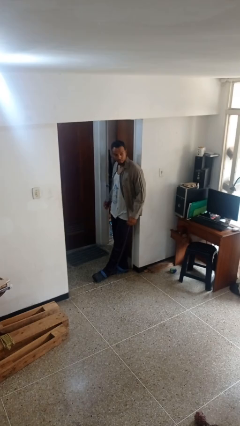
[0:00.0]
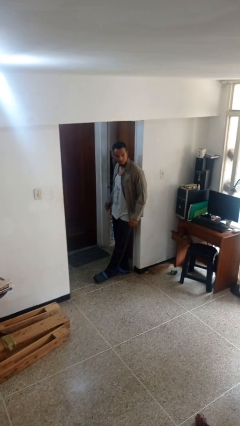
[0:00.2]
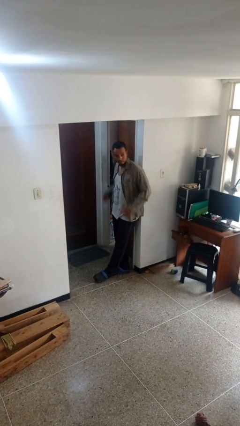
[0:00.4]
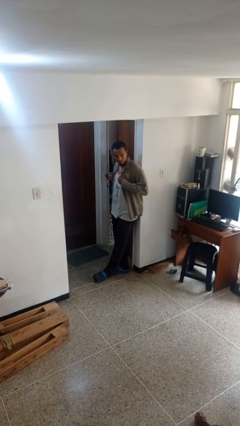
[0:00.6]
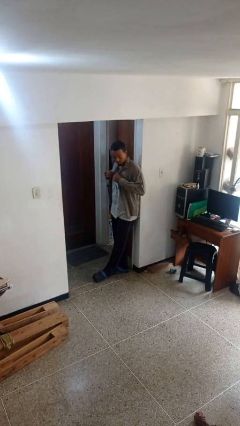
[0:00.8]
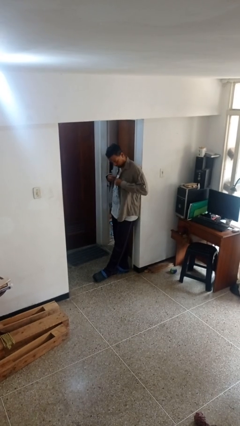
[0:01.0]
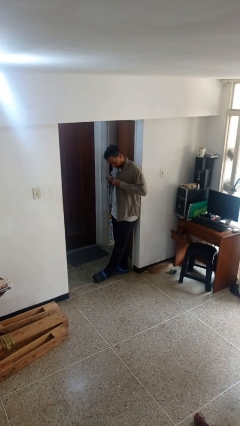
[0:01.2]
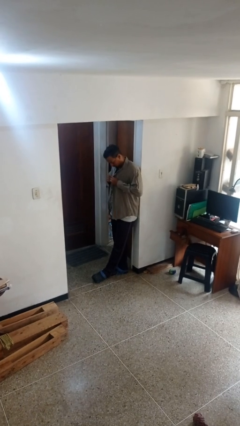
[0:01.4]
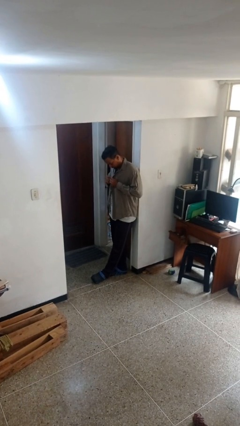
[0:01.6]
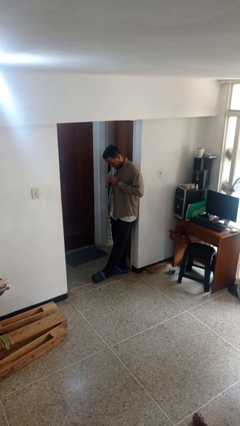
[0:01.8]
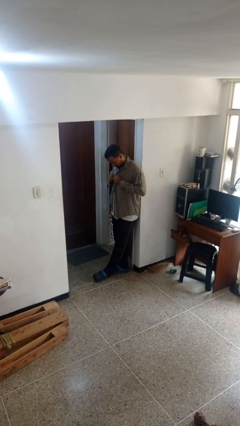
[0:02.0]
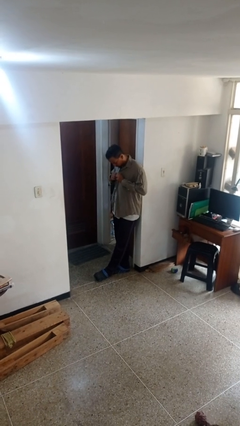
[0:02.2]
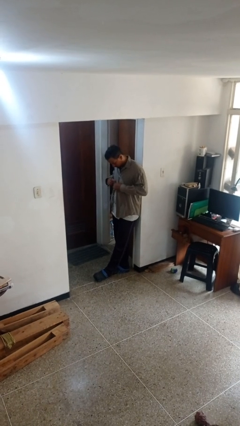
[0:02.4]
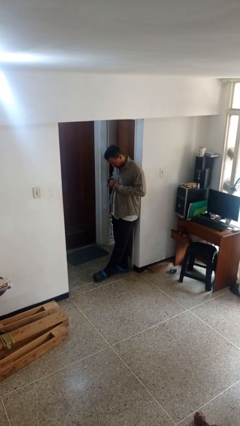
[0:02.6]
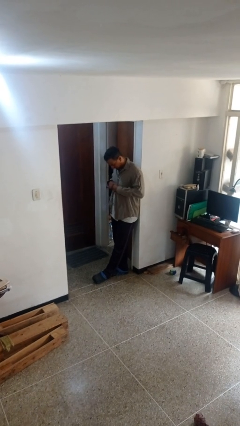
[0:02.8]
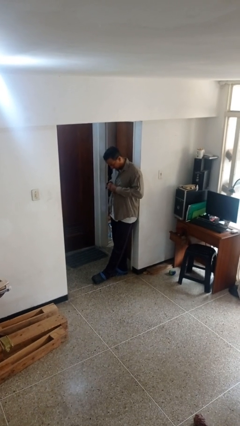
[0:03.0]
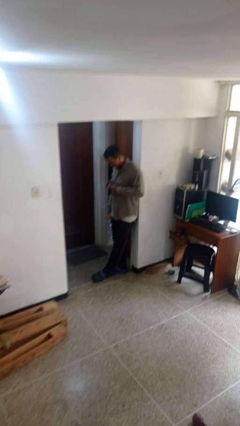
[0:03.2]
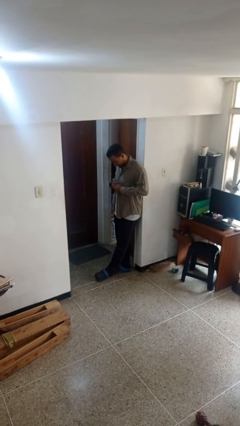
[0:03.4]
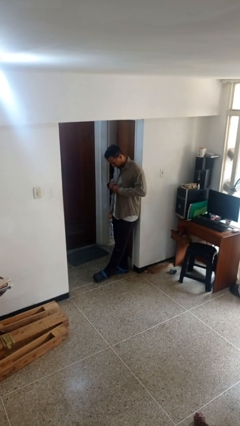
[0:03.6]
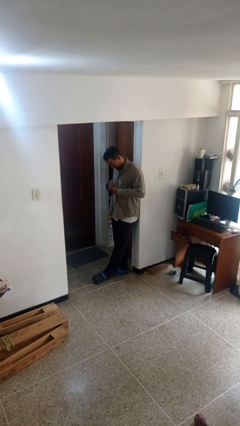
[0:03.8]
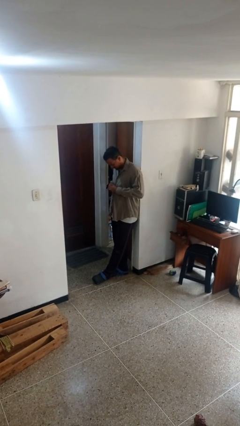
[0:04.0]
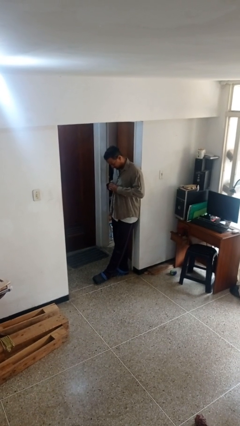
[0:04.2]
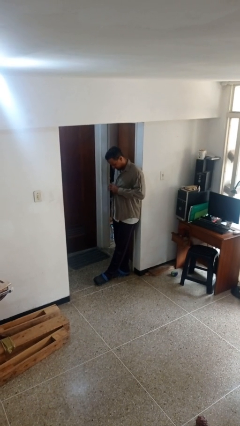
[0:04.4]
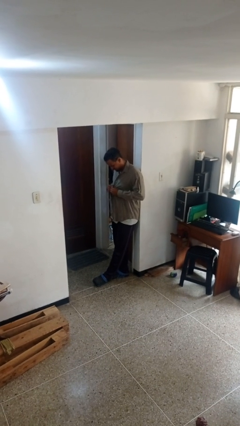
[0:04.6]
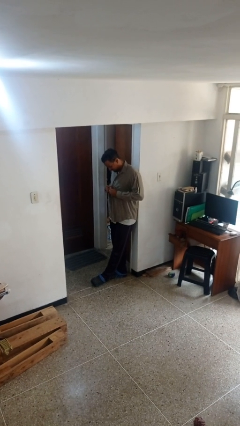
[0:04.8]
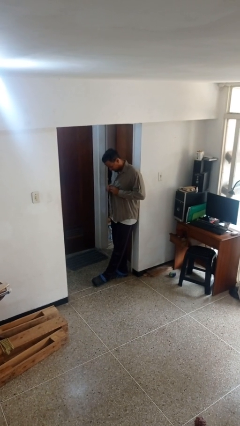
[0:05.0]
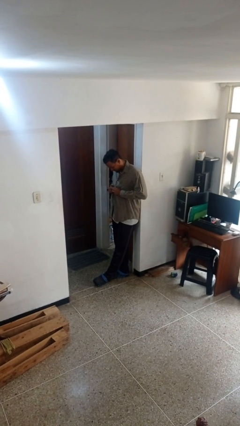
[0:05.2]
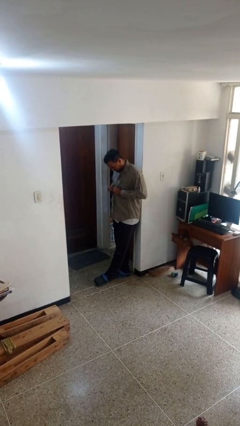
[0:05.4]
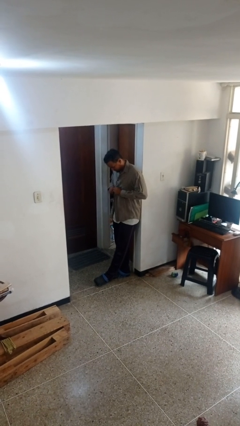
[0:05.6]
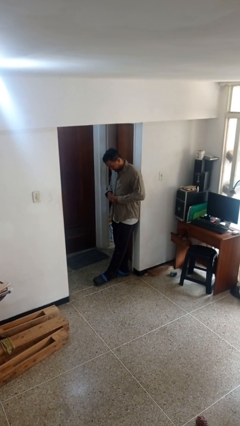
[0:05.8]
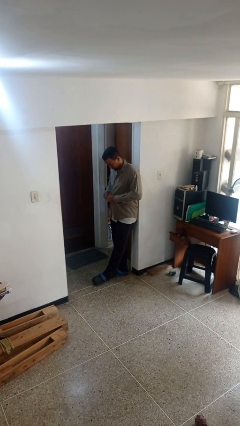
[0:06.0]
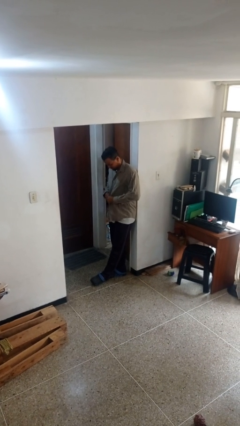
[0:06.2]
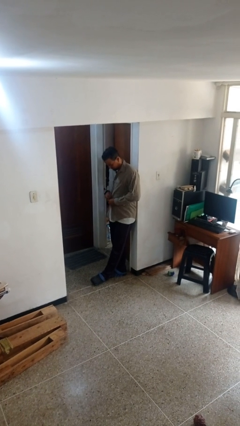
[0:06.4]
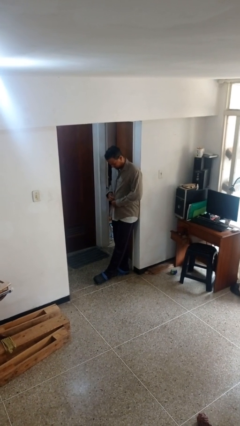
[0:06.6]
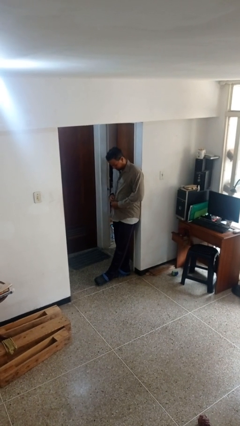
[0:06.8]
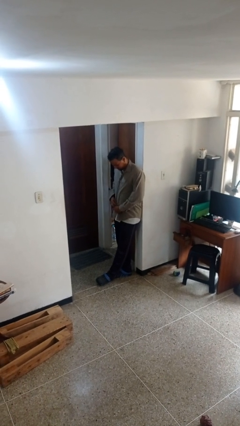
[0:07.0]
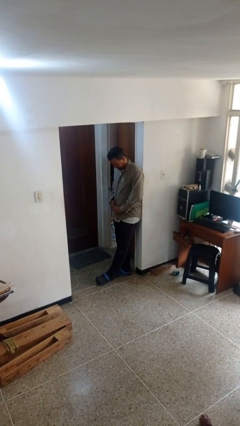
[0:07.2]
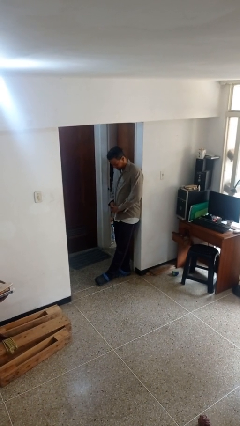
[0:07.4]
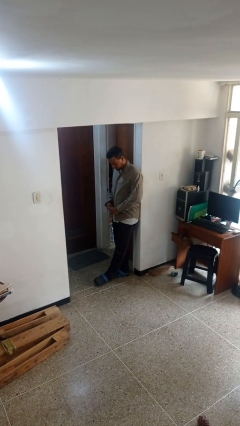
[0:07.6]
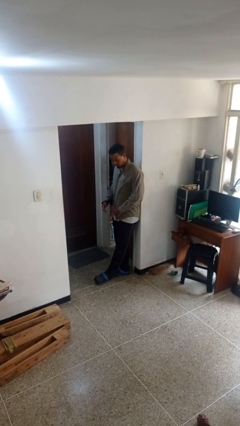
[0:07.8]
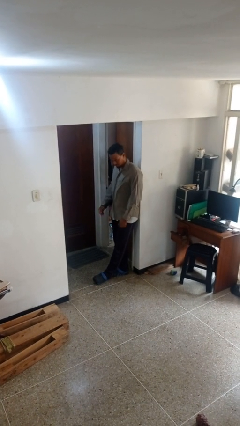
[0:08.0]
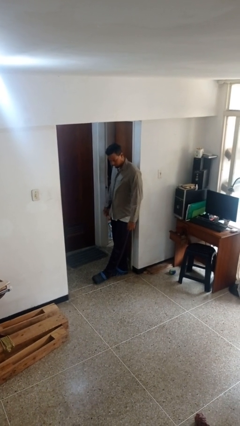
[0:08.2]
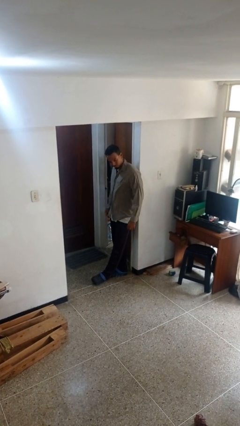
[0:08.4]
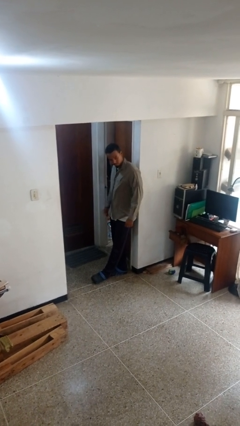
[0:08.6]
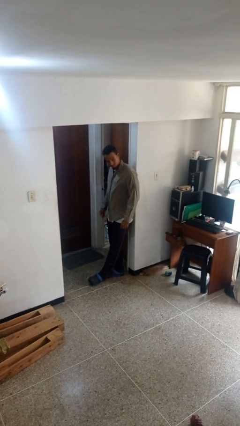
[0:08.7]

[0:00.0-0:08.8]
person buttons shirt

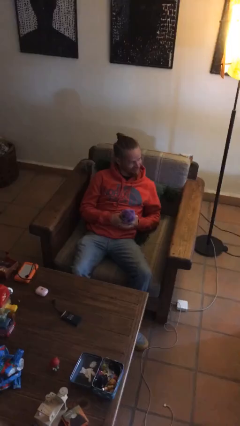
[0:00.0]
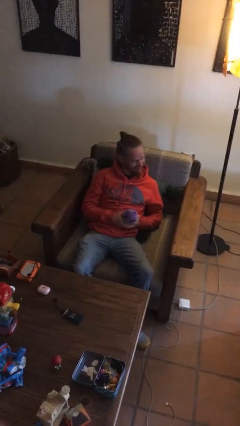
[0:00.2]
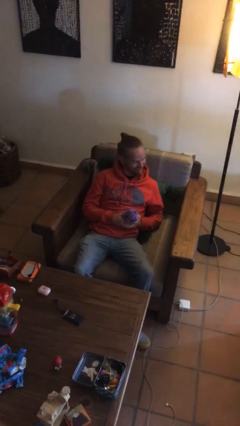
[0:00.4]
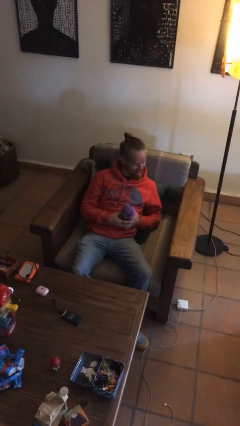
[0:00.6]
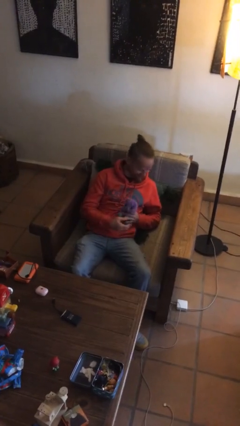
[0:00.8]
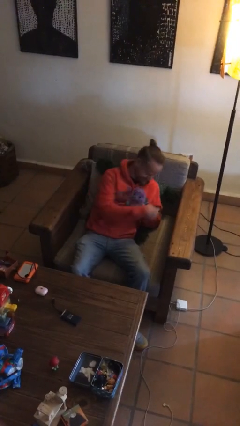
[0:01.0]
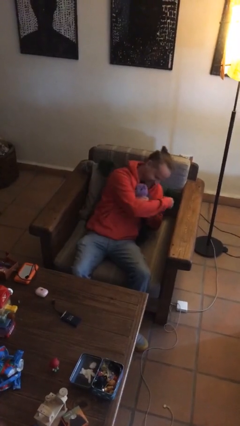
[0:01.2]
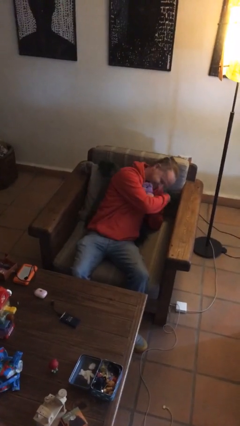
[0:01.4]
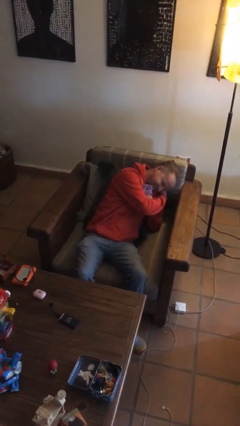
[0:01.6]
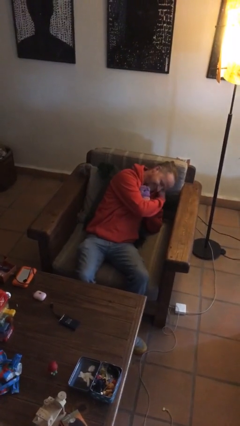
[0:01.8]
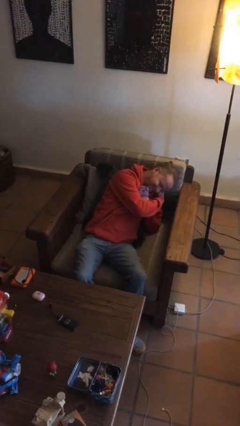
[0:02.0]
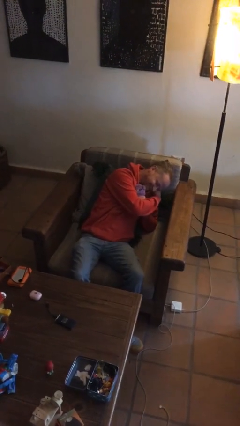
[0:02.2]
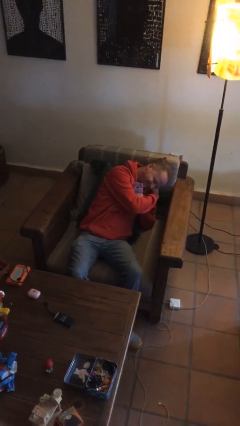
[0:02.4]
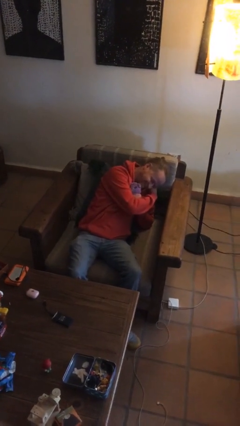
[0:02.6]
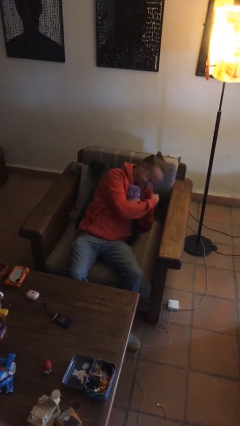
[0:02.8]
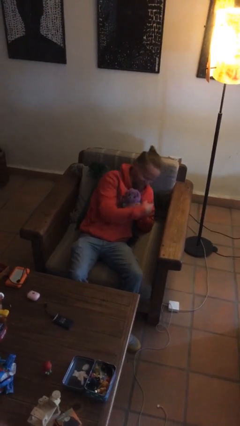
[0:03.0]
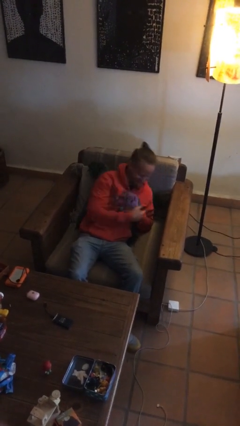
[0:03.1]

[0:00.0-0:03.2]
person hugs stuffed animal

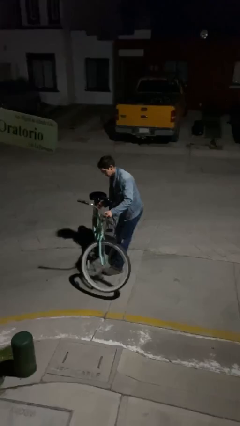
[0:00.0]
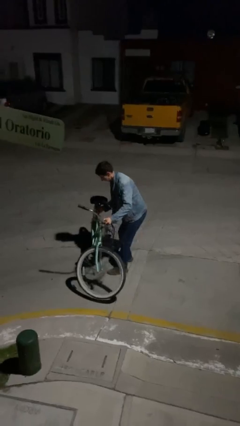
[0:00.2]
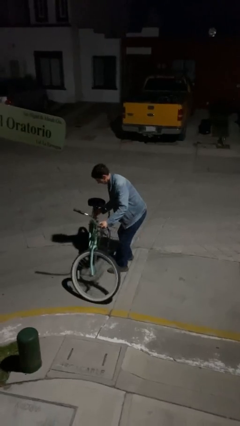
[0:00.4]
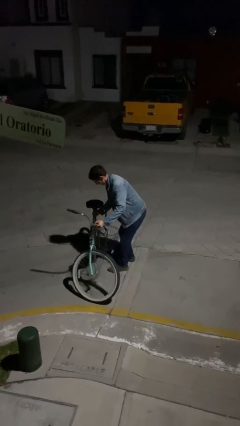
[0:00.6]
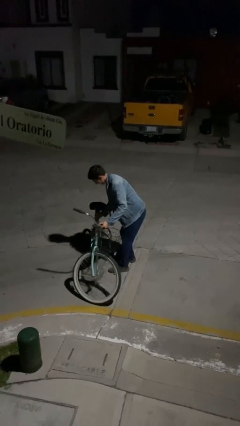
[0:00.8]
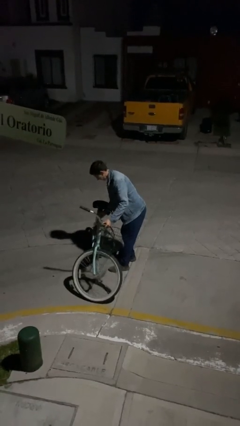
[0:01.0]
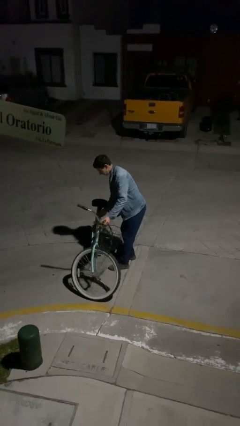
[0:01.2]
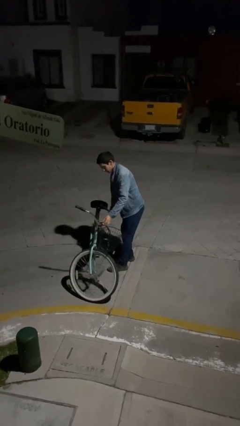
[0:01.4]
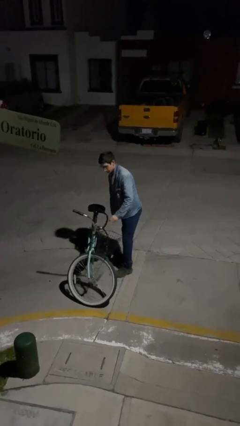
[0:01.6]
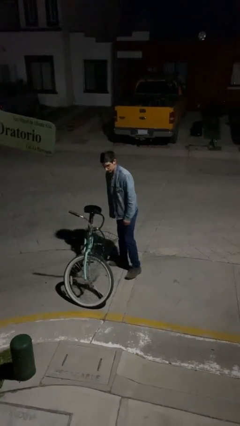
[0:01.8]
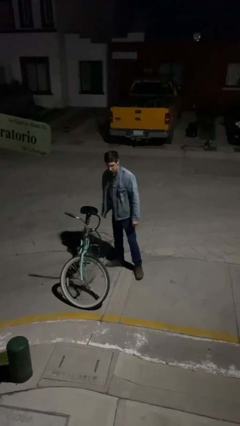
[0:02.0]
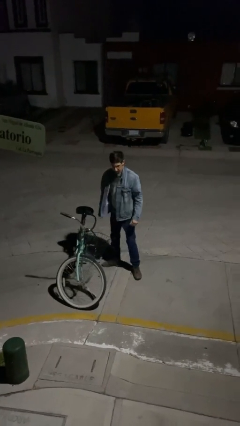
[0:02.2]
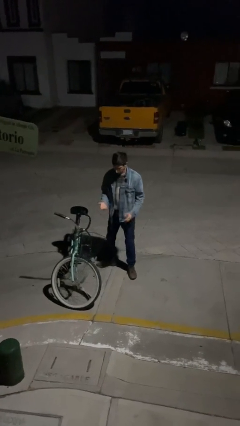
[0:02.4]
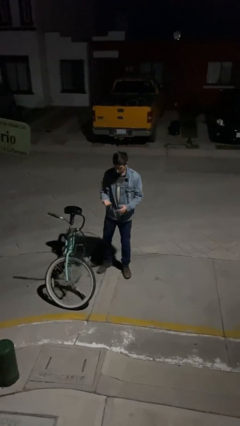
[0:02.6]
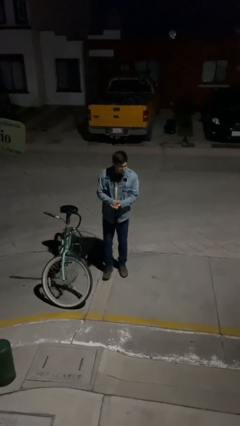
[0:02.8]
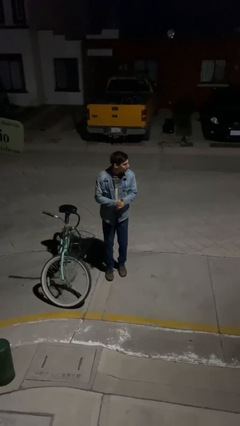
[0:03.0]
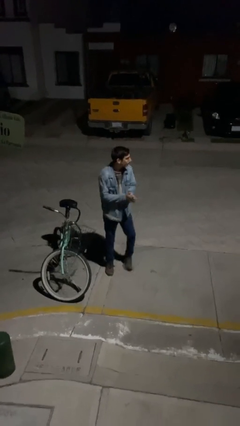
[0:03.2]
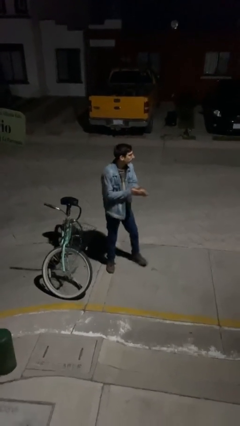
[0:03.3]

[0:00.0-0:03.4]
person puts down object on floor

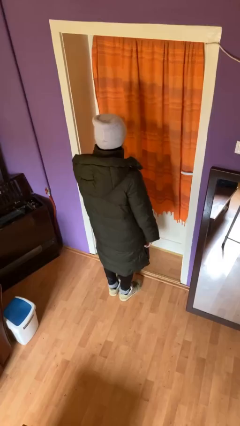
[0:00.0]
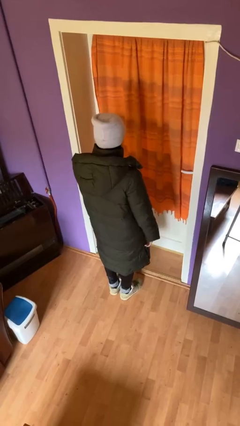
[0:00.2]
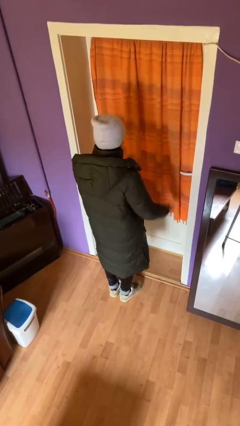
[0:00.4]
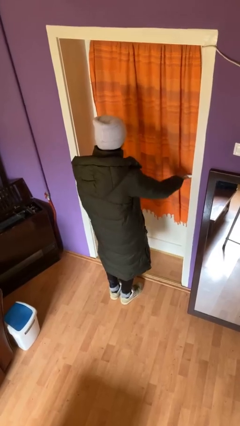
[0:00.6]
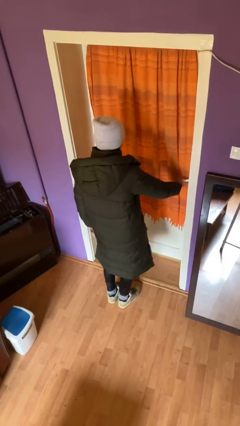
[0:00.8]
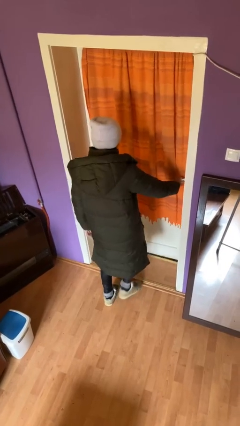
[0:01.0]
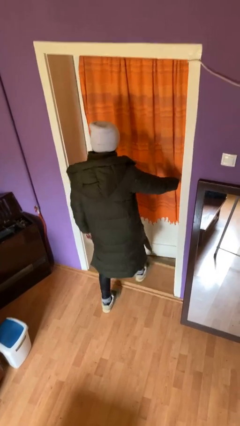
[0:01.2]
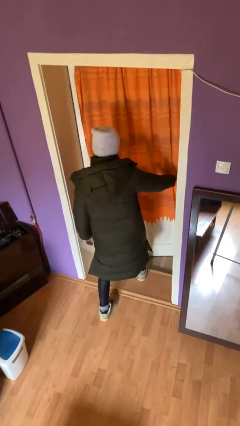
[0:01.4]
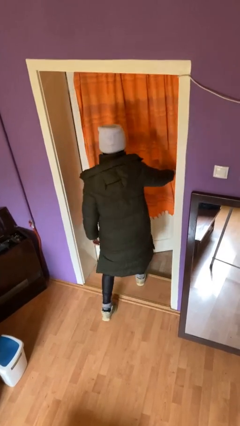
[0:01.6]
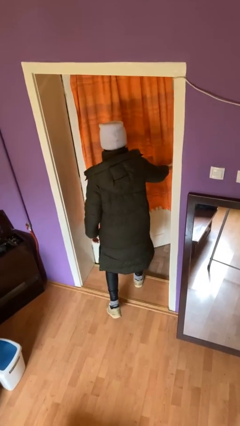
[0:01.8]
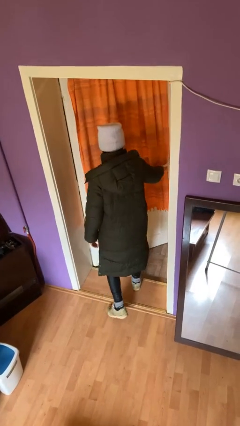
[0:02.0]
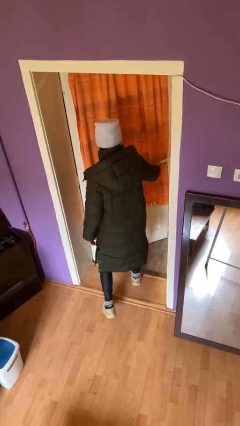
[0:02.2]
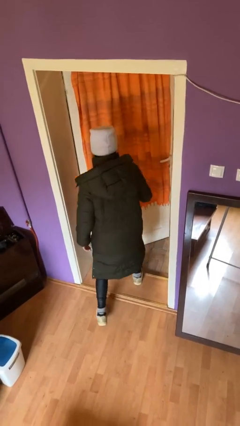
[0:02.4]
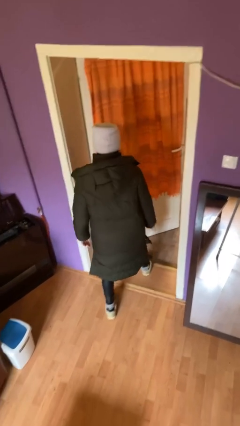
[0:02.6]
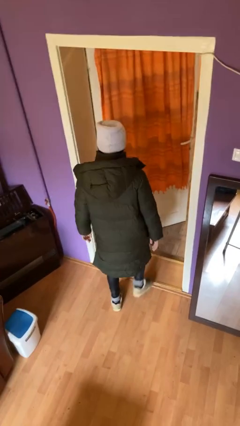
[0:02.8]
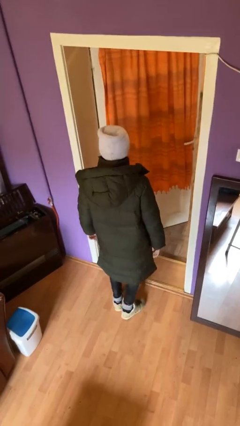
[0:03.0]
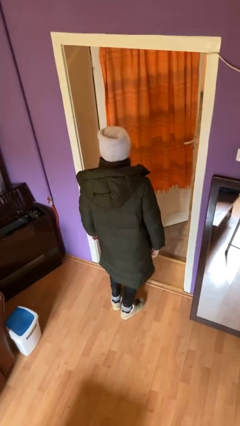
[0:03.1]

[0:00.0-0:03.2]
person opens facility door
